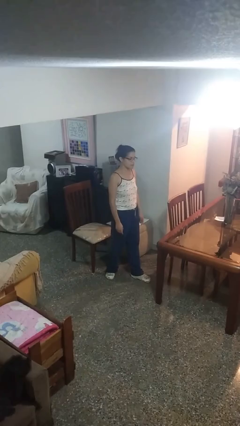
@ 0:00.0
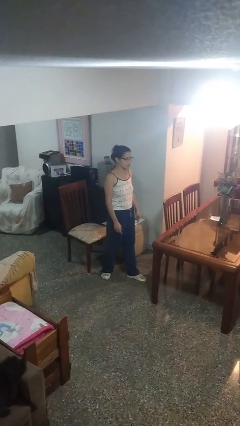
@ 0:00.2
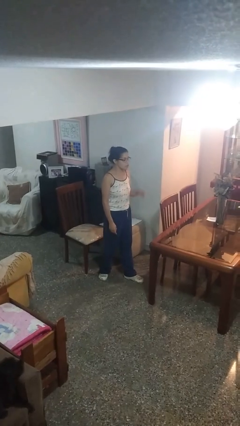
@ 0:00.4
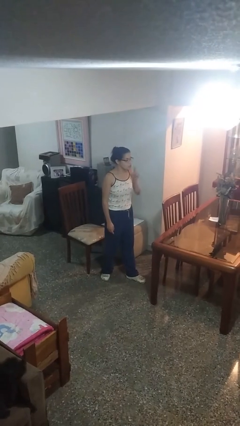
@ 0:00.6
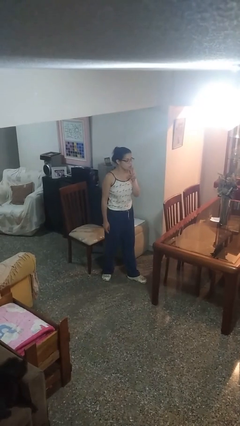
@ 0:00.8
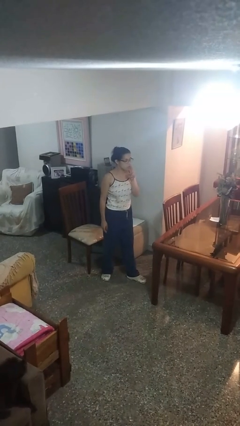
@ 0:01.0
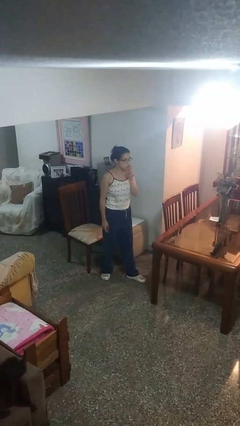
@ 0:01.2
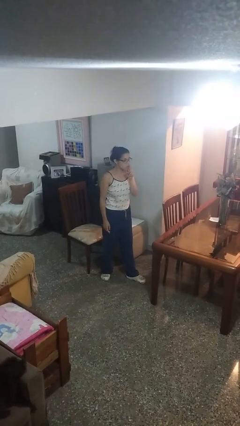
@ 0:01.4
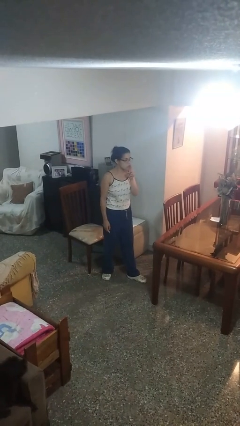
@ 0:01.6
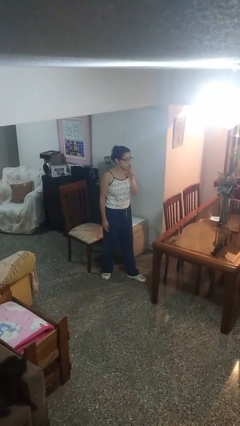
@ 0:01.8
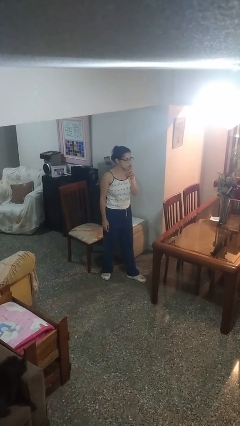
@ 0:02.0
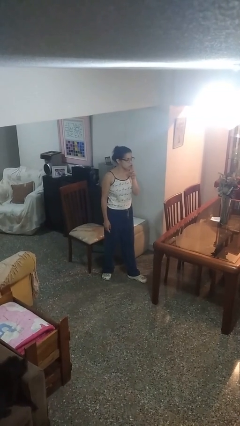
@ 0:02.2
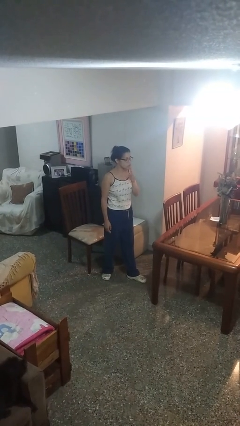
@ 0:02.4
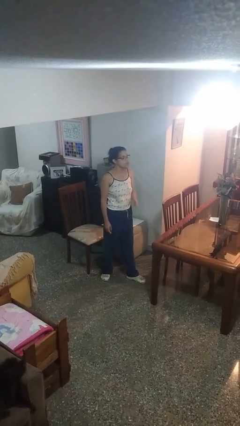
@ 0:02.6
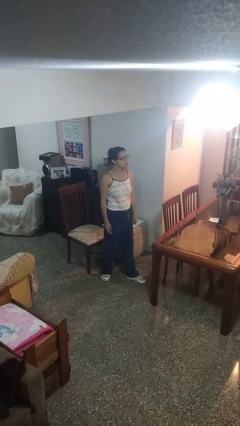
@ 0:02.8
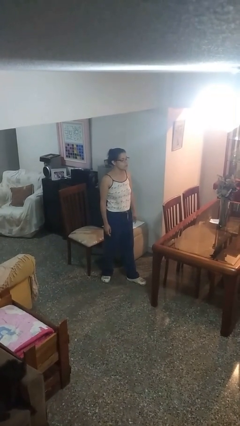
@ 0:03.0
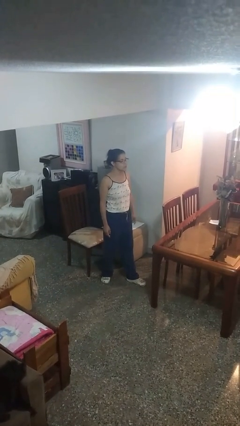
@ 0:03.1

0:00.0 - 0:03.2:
person gestures be quiet

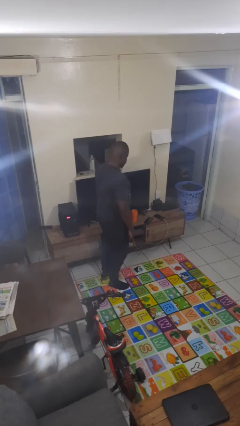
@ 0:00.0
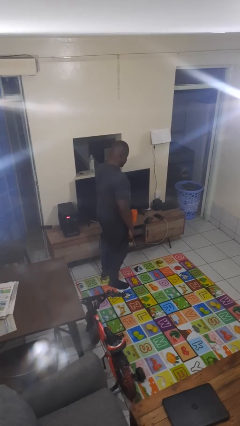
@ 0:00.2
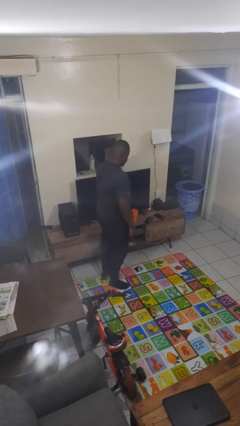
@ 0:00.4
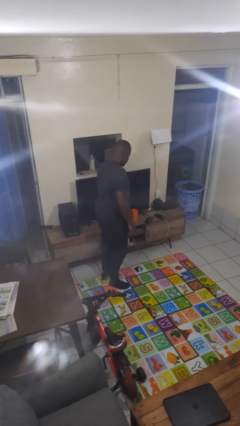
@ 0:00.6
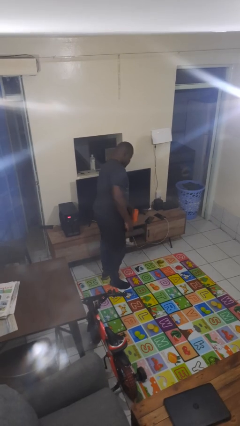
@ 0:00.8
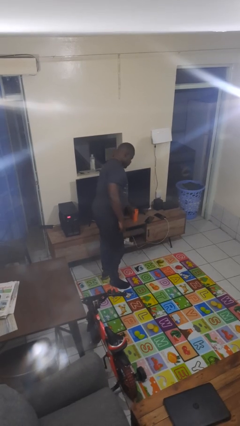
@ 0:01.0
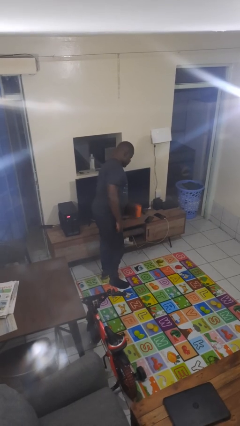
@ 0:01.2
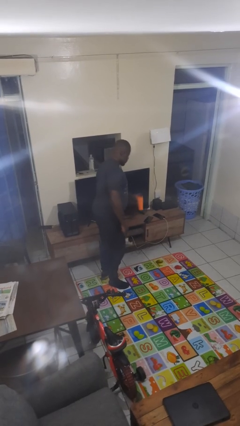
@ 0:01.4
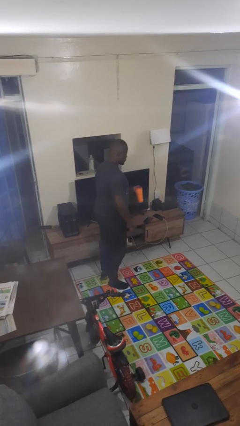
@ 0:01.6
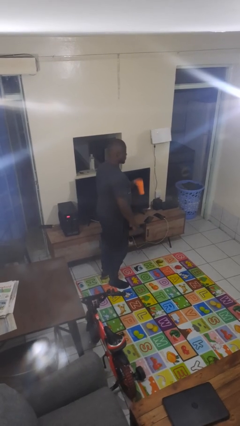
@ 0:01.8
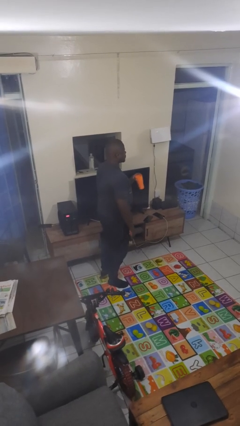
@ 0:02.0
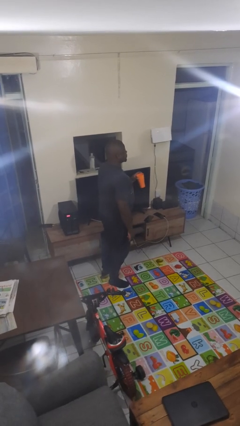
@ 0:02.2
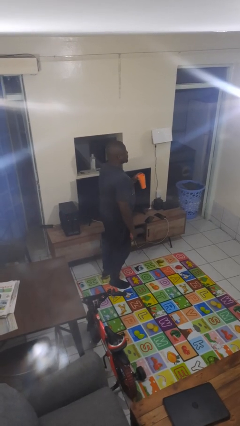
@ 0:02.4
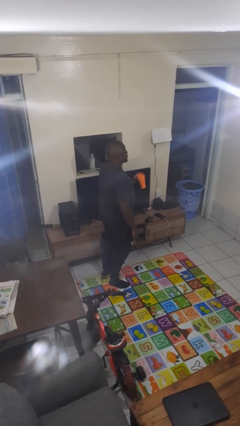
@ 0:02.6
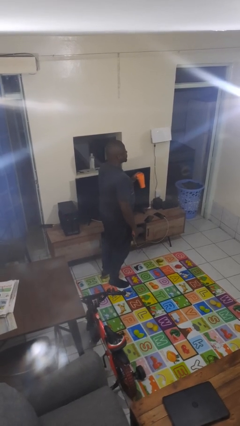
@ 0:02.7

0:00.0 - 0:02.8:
person picks up object from countertop

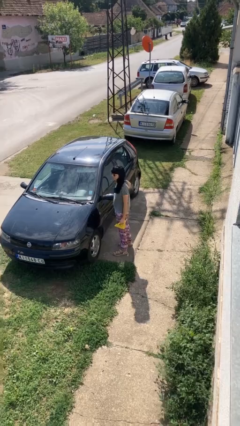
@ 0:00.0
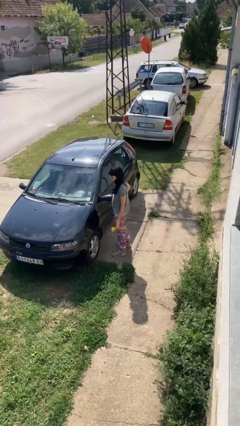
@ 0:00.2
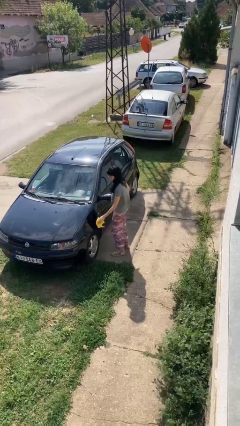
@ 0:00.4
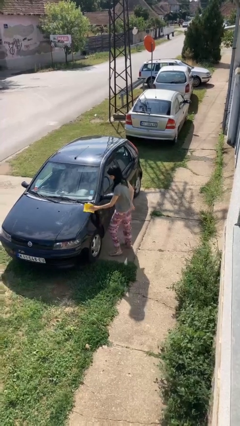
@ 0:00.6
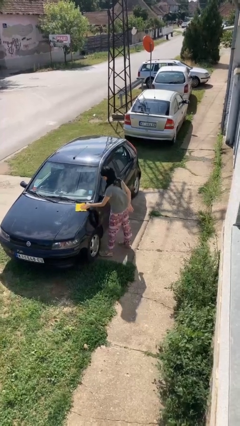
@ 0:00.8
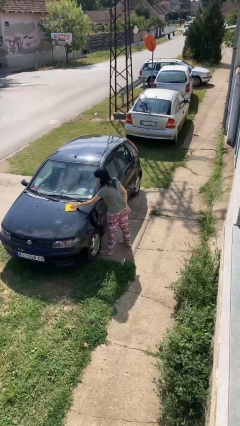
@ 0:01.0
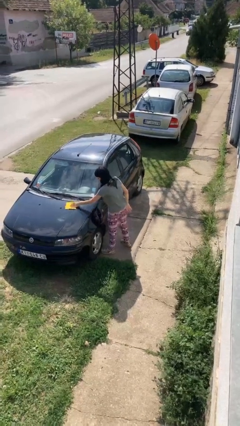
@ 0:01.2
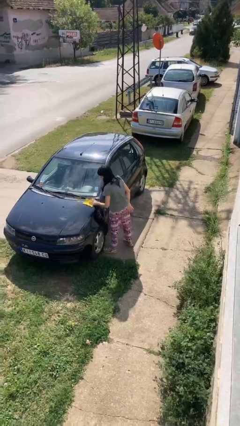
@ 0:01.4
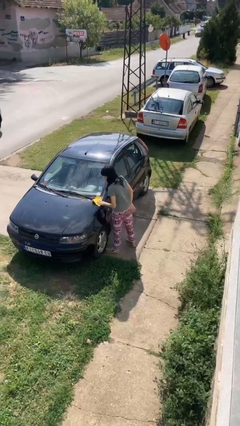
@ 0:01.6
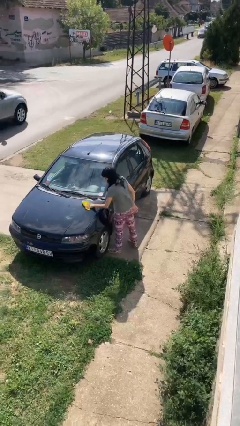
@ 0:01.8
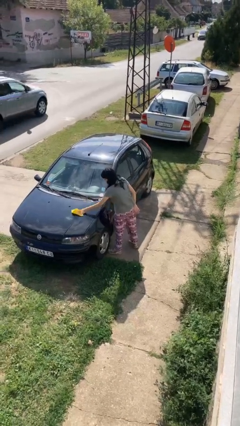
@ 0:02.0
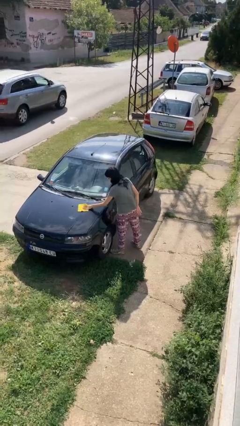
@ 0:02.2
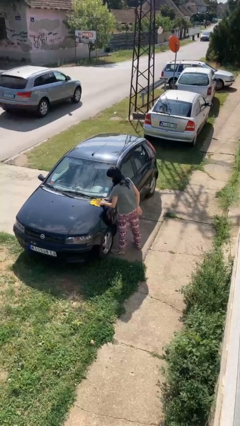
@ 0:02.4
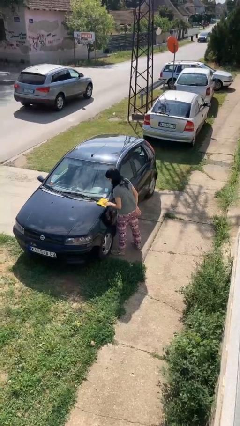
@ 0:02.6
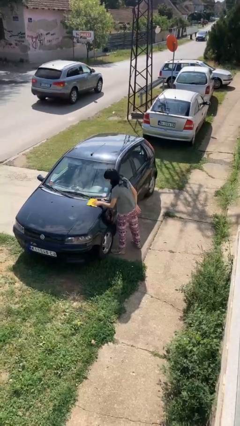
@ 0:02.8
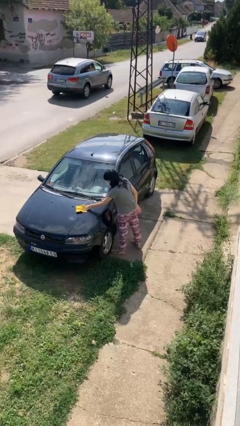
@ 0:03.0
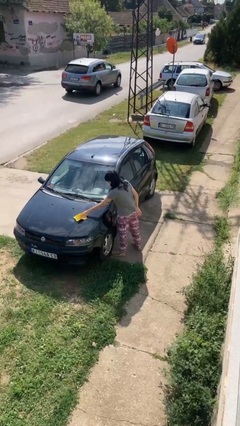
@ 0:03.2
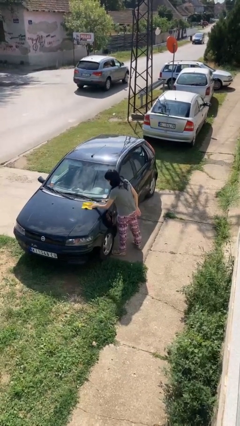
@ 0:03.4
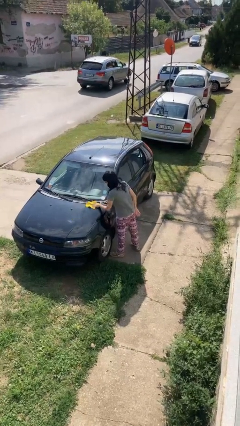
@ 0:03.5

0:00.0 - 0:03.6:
person polishes car with rag

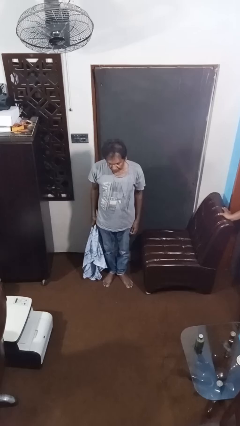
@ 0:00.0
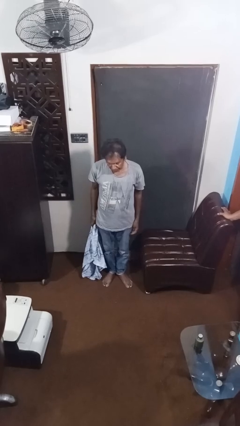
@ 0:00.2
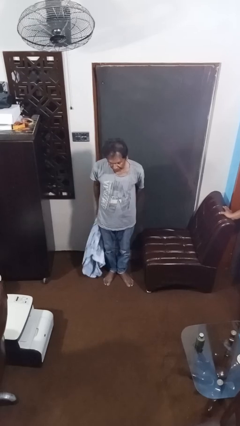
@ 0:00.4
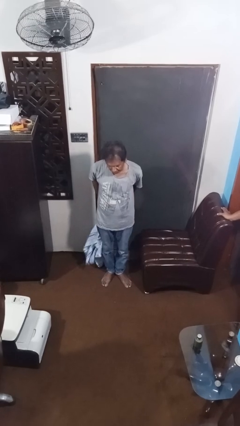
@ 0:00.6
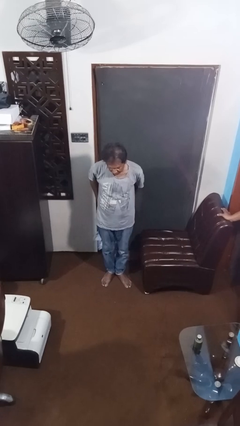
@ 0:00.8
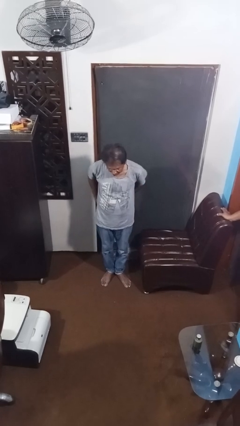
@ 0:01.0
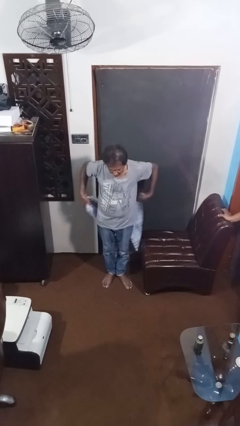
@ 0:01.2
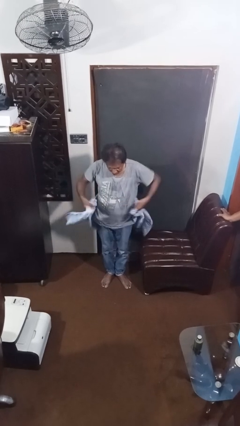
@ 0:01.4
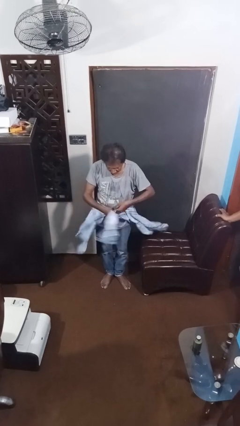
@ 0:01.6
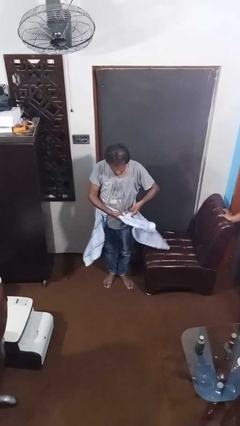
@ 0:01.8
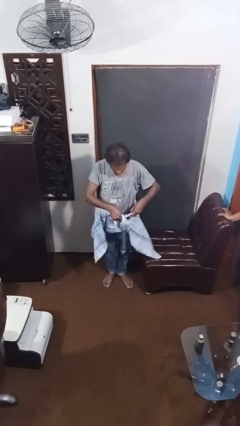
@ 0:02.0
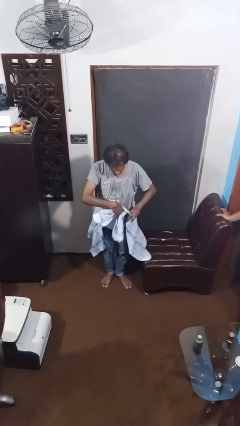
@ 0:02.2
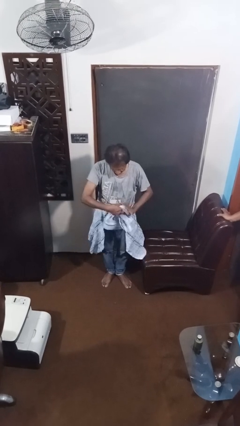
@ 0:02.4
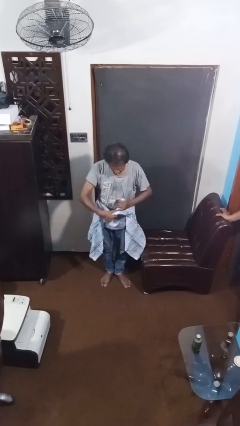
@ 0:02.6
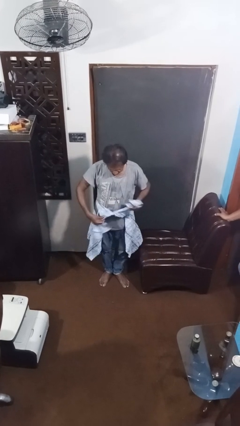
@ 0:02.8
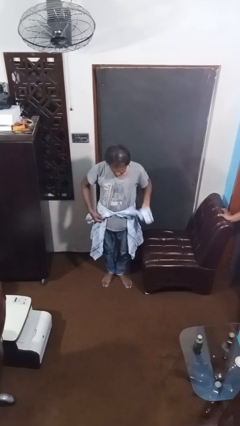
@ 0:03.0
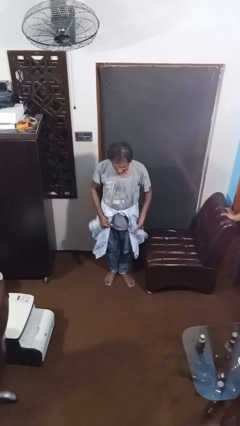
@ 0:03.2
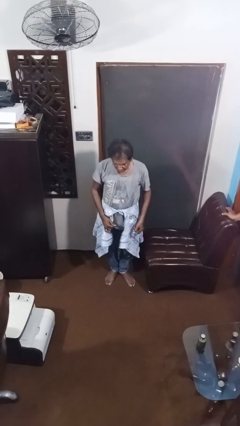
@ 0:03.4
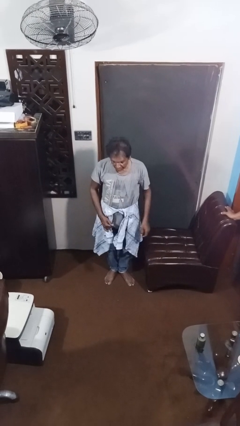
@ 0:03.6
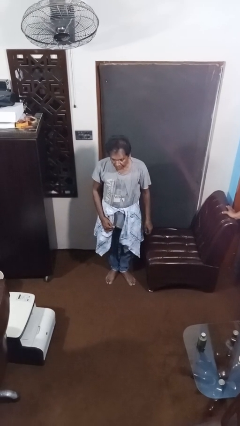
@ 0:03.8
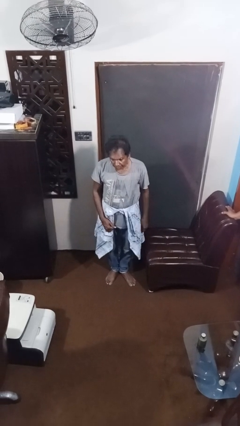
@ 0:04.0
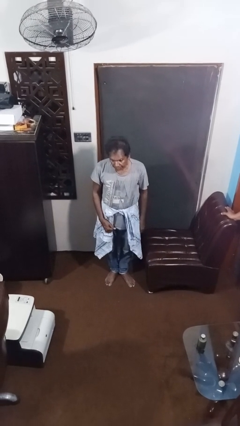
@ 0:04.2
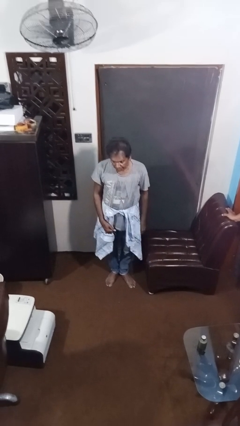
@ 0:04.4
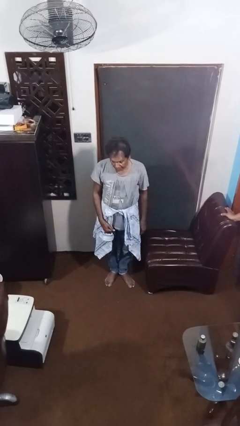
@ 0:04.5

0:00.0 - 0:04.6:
person ties jacket around waist

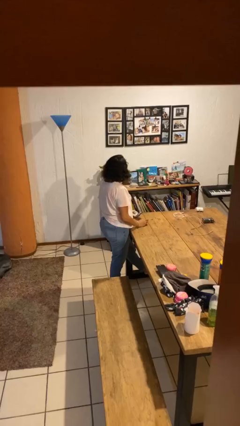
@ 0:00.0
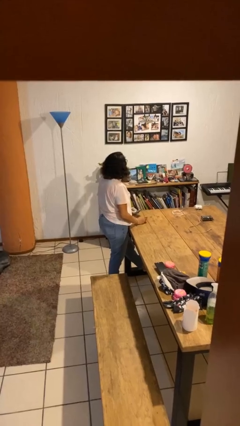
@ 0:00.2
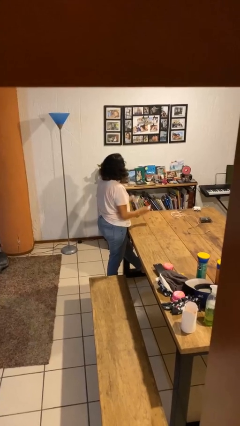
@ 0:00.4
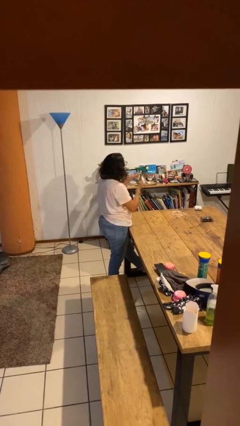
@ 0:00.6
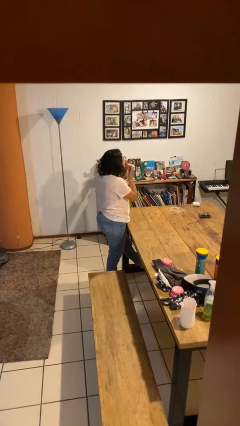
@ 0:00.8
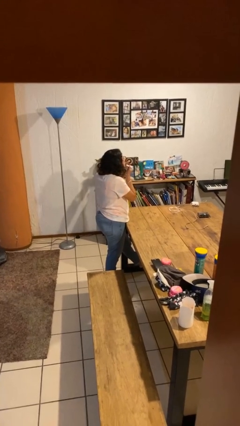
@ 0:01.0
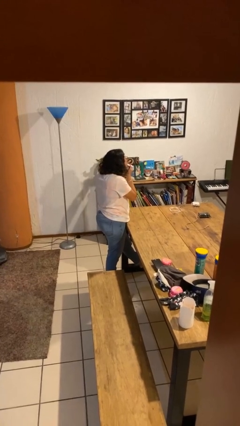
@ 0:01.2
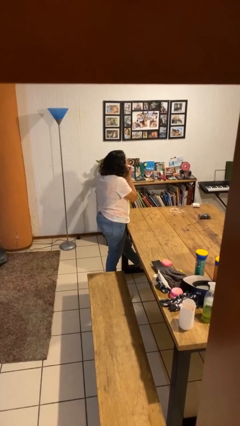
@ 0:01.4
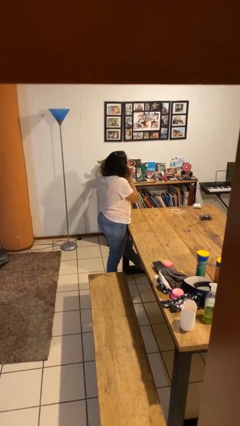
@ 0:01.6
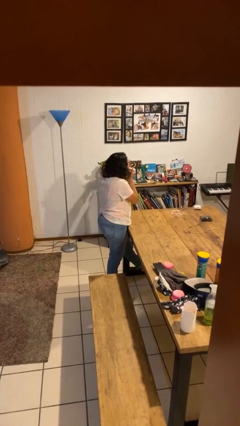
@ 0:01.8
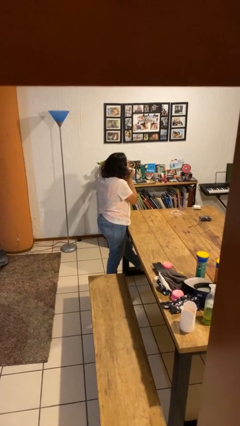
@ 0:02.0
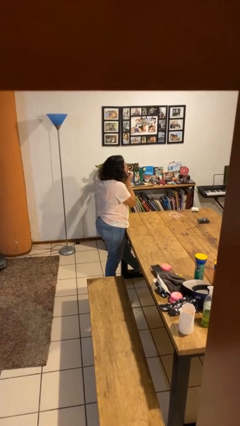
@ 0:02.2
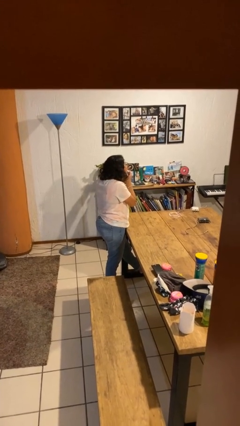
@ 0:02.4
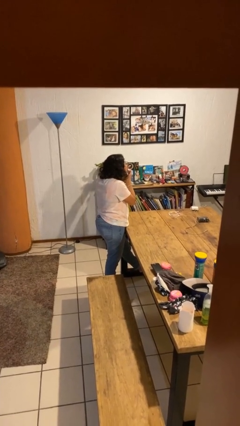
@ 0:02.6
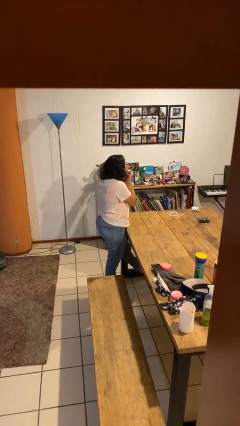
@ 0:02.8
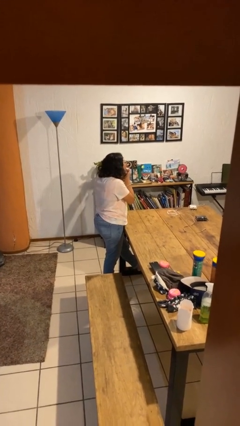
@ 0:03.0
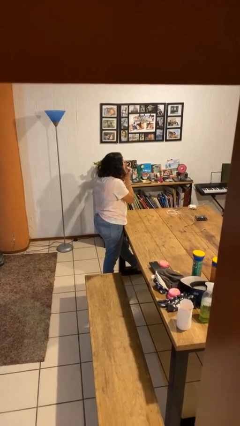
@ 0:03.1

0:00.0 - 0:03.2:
person applies lip makeup
